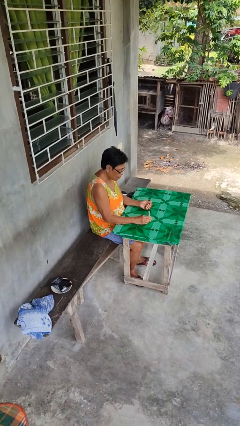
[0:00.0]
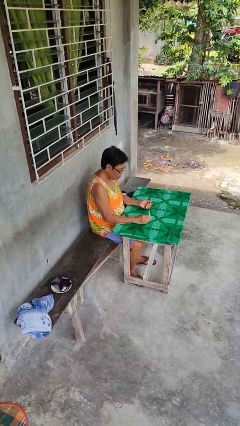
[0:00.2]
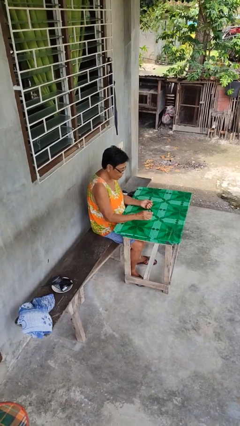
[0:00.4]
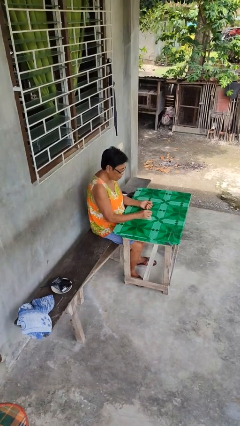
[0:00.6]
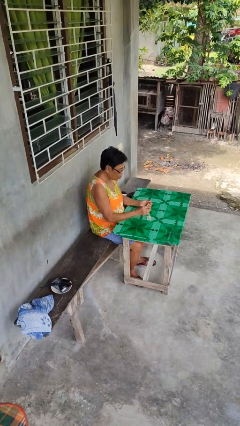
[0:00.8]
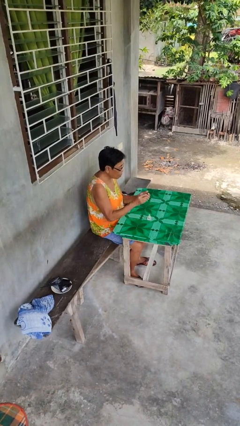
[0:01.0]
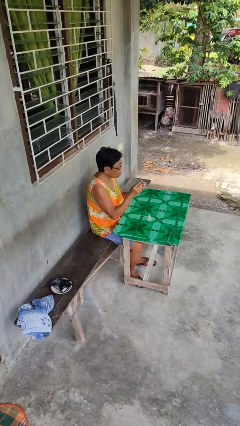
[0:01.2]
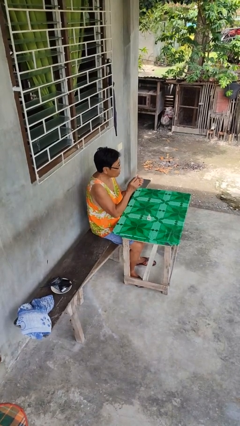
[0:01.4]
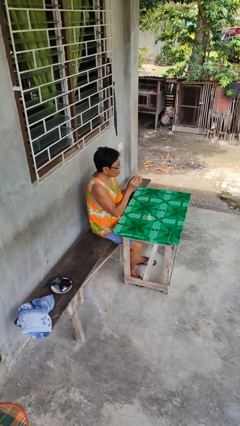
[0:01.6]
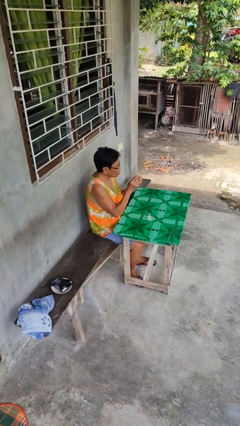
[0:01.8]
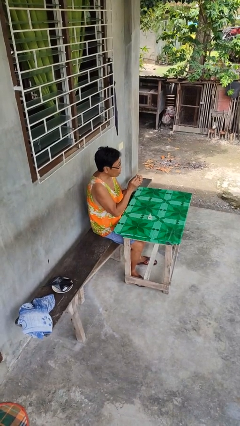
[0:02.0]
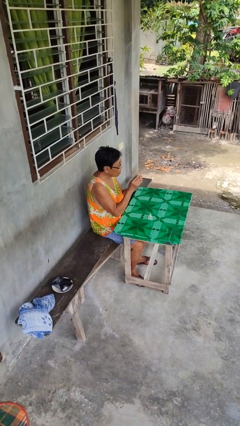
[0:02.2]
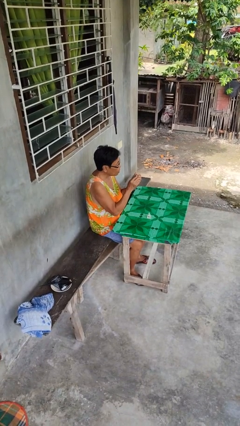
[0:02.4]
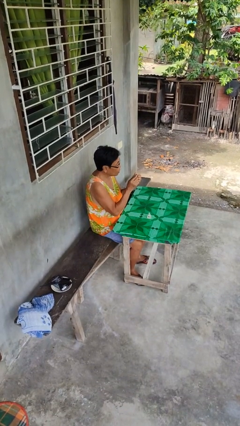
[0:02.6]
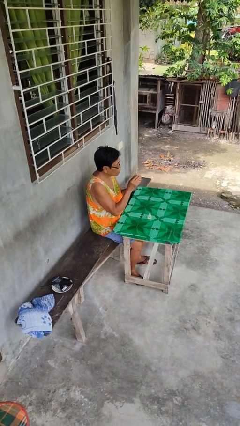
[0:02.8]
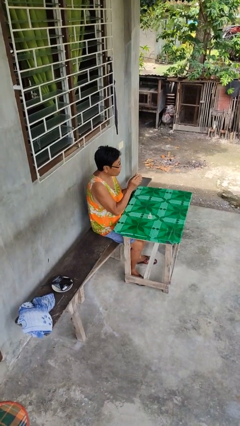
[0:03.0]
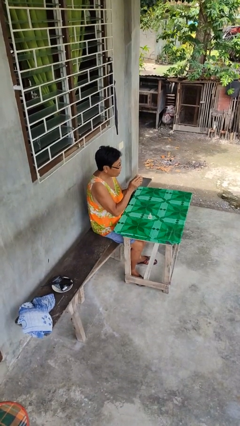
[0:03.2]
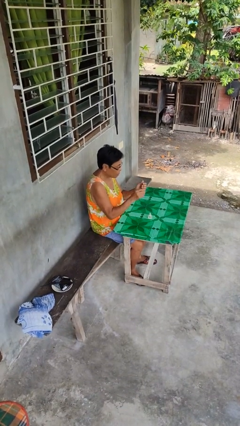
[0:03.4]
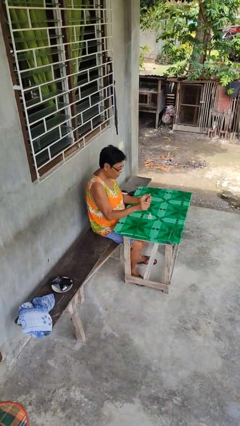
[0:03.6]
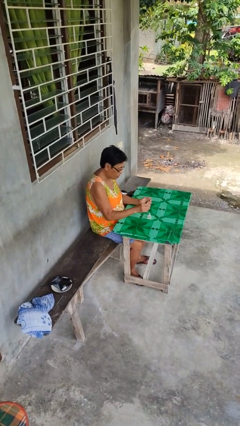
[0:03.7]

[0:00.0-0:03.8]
person paints fingernails

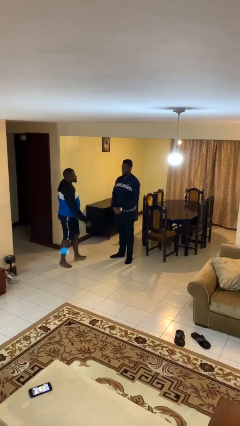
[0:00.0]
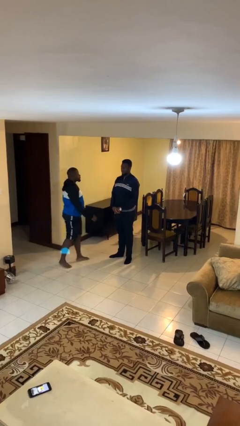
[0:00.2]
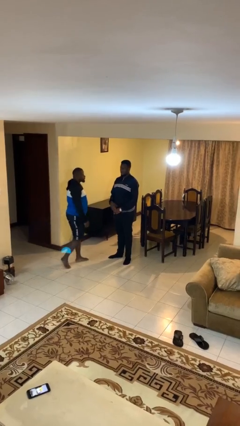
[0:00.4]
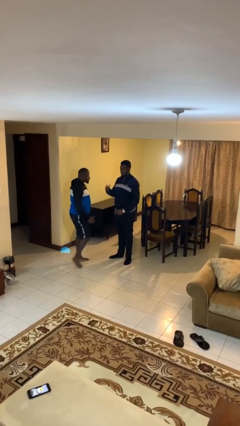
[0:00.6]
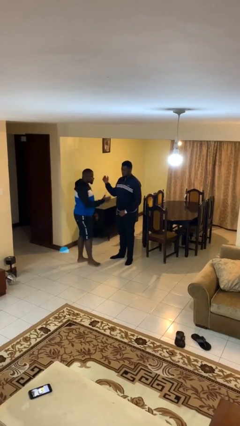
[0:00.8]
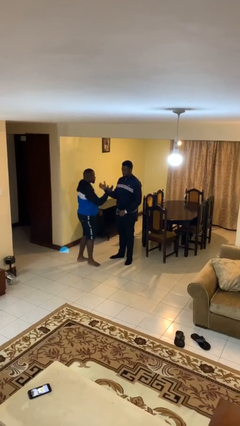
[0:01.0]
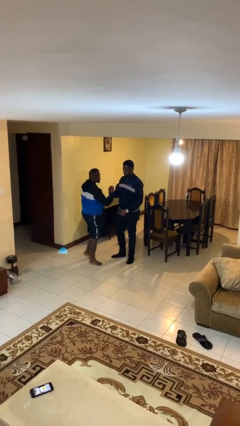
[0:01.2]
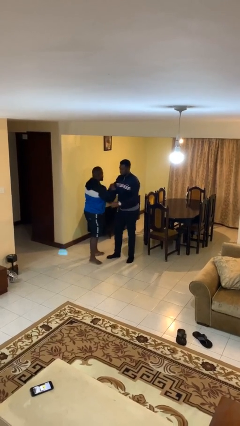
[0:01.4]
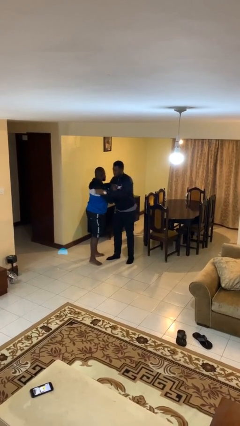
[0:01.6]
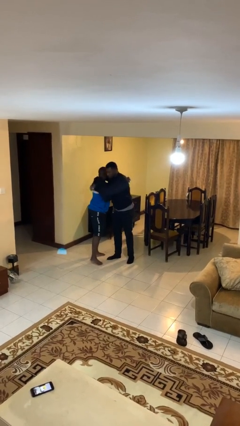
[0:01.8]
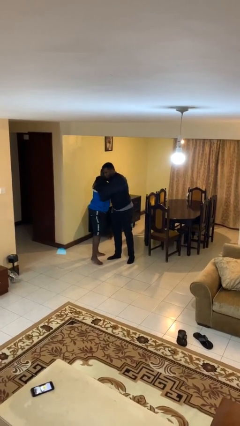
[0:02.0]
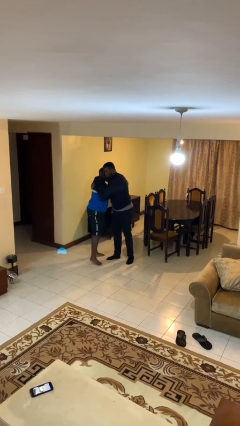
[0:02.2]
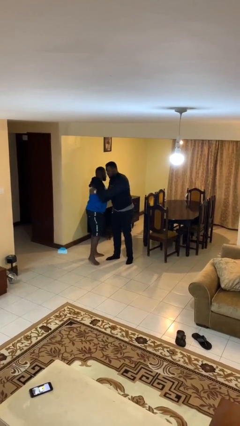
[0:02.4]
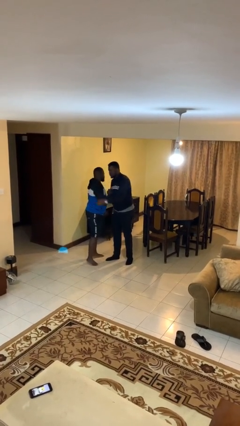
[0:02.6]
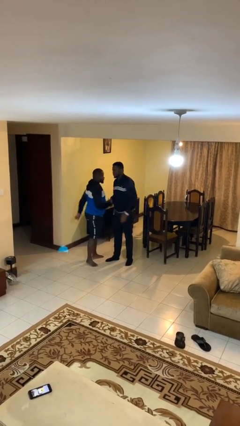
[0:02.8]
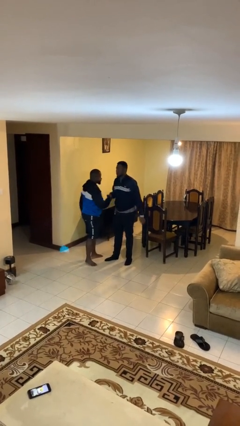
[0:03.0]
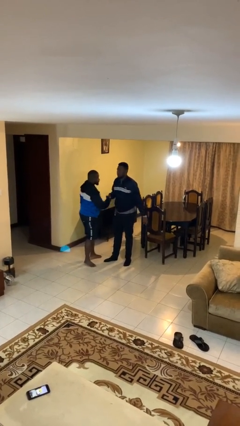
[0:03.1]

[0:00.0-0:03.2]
person embraces person

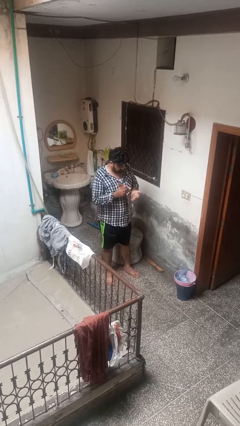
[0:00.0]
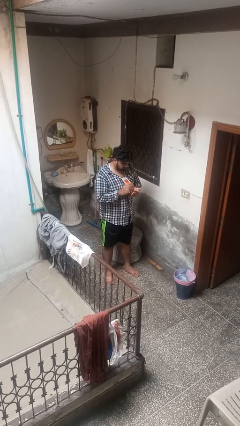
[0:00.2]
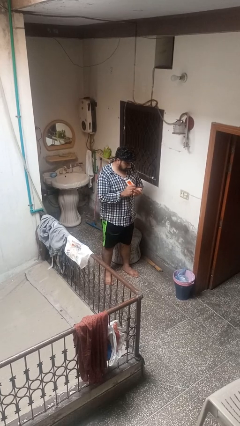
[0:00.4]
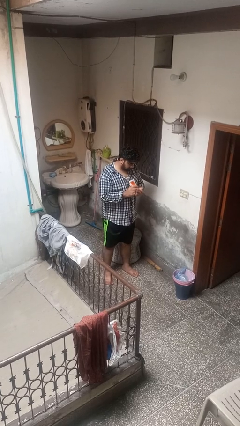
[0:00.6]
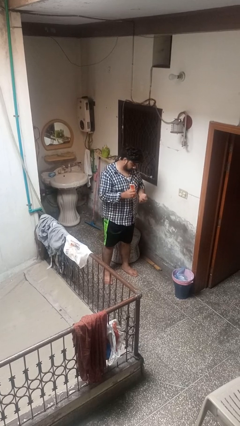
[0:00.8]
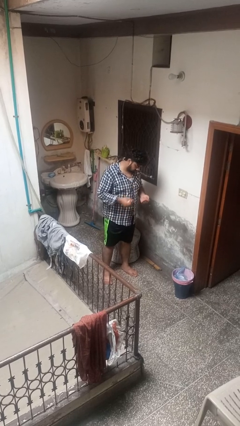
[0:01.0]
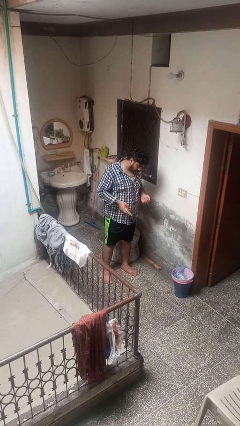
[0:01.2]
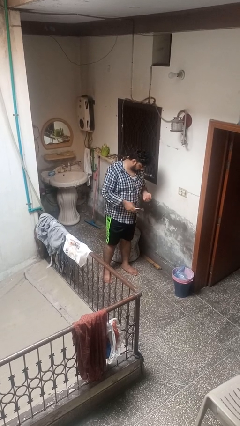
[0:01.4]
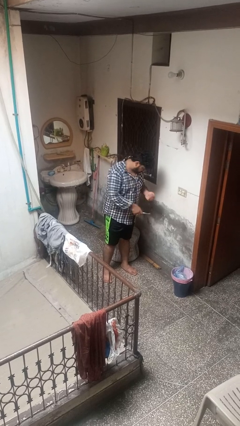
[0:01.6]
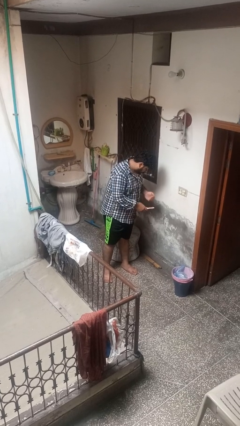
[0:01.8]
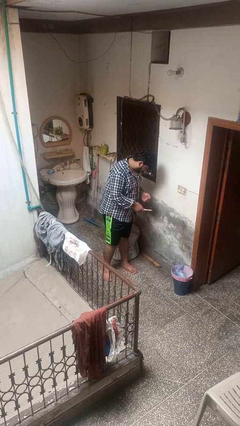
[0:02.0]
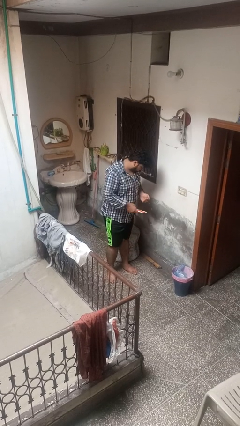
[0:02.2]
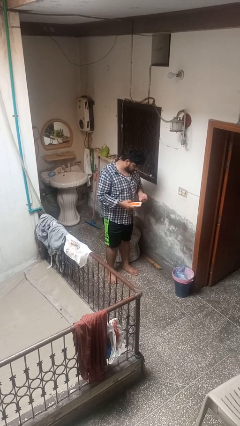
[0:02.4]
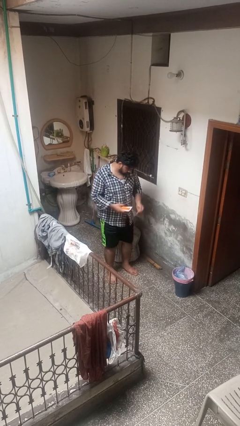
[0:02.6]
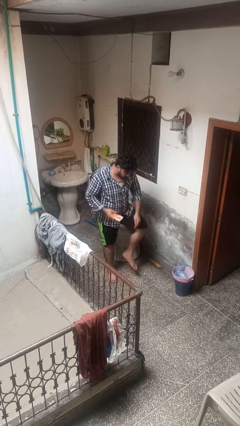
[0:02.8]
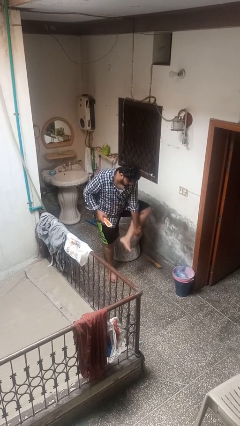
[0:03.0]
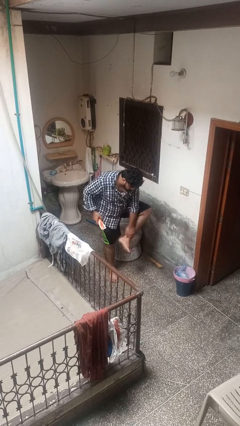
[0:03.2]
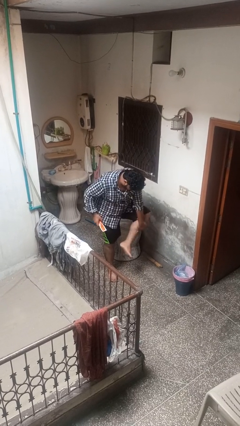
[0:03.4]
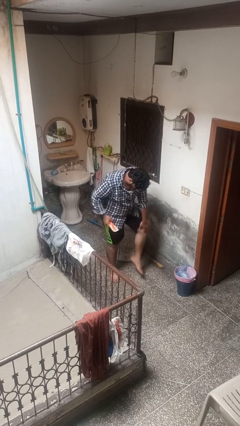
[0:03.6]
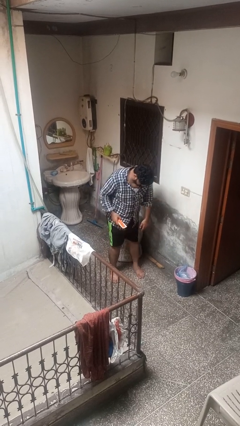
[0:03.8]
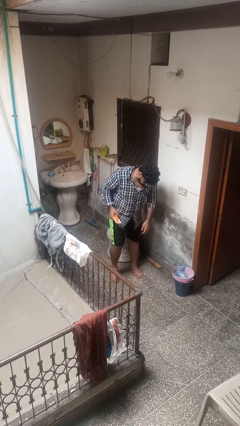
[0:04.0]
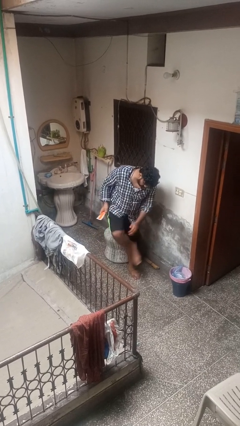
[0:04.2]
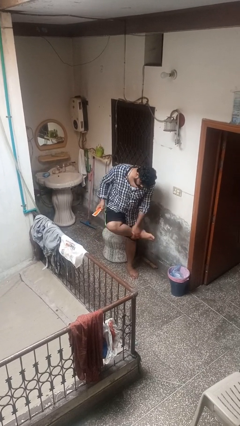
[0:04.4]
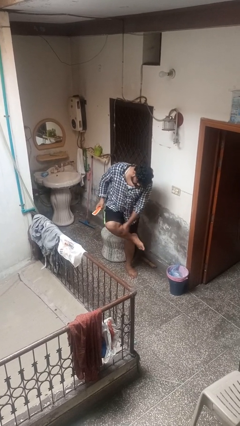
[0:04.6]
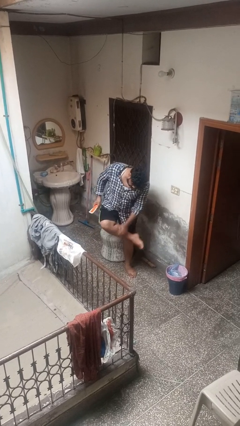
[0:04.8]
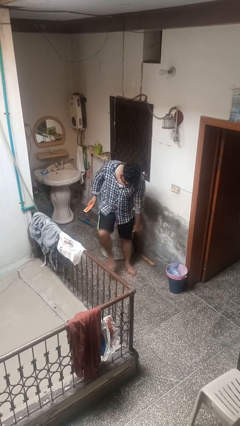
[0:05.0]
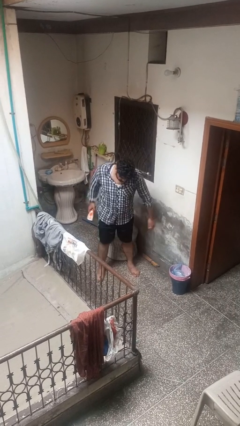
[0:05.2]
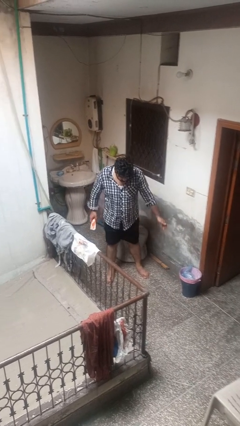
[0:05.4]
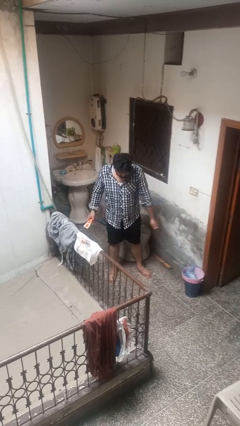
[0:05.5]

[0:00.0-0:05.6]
person applies sunscreen

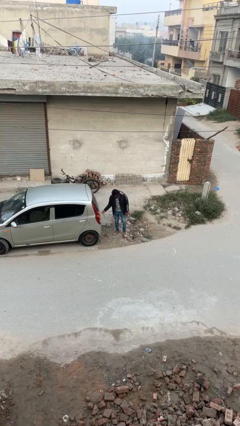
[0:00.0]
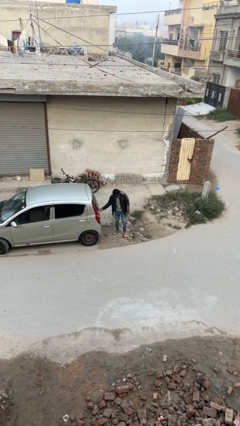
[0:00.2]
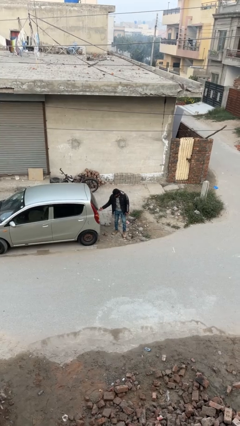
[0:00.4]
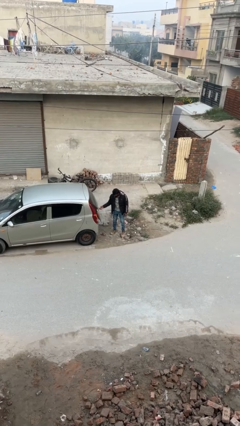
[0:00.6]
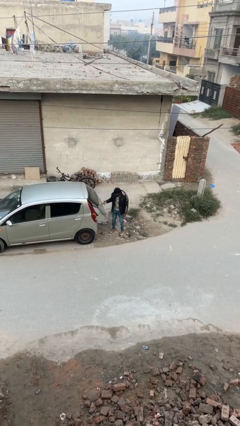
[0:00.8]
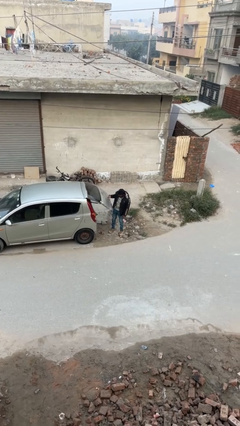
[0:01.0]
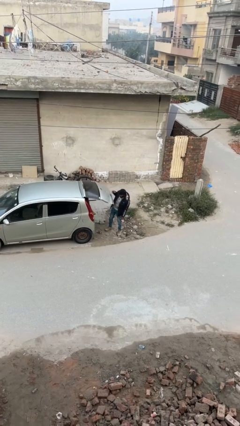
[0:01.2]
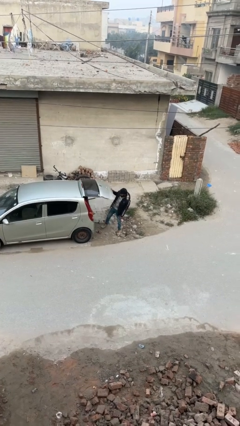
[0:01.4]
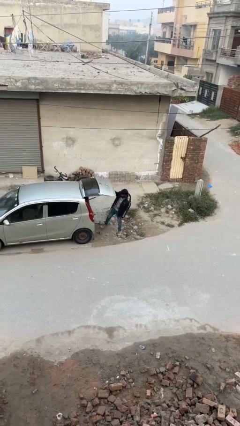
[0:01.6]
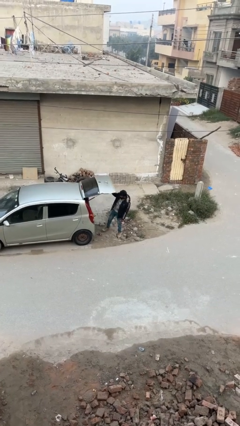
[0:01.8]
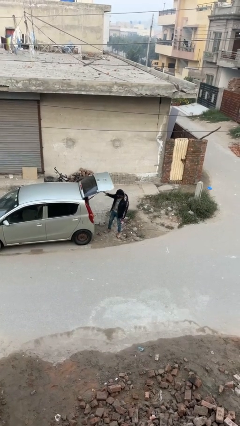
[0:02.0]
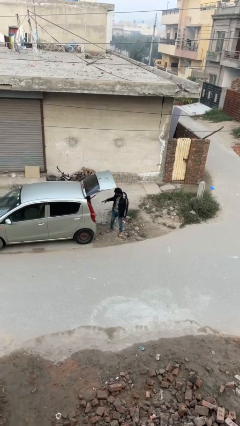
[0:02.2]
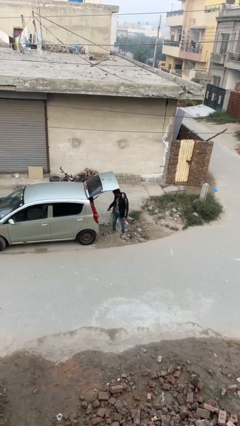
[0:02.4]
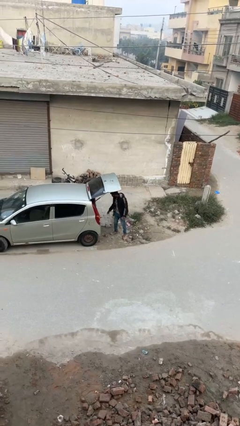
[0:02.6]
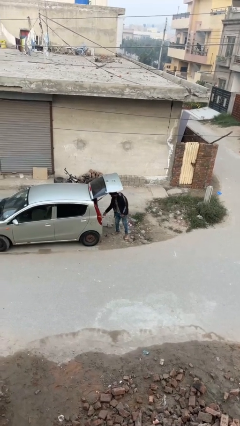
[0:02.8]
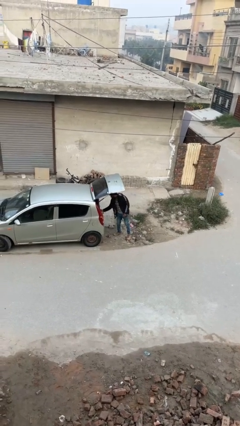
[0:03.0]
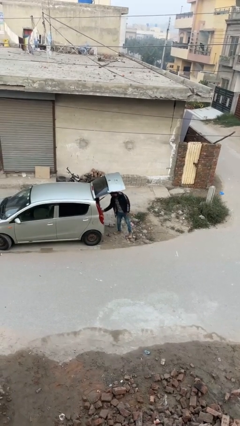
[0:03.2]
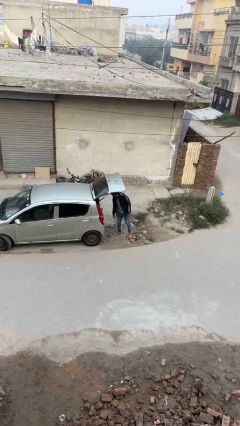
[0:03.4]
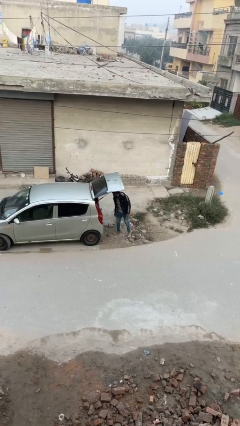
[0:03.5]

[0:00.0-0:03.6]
person opens car trunk

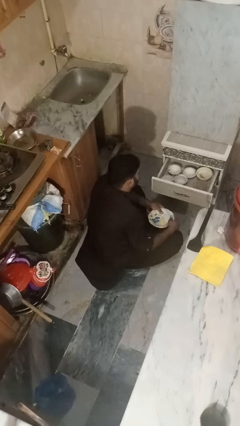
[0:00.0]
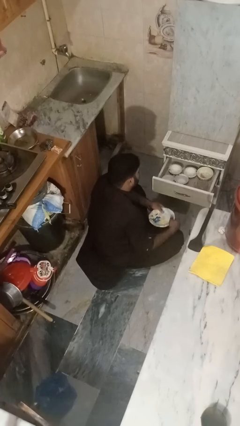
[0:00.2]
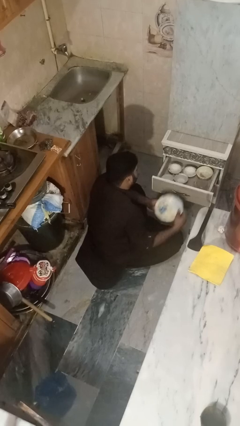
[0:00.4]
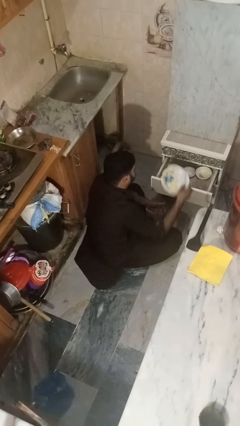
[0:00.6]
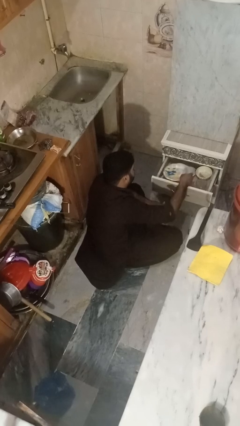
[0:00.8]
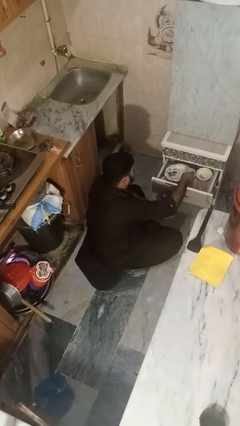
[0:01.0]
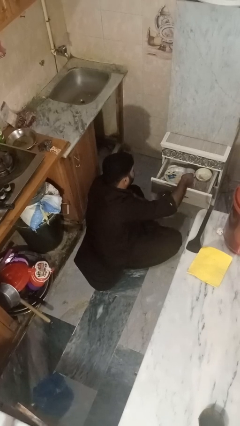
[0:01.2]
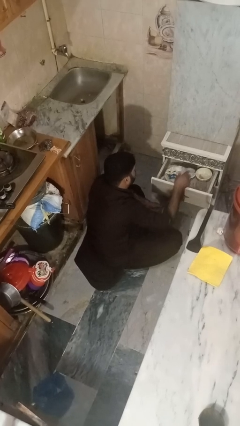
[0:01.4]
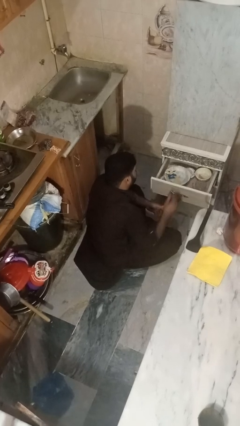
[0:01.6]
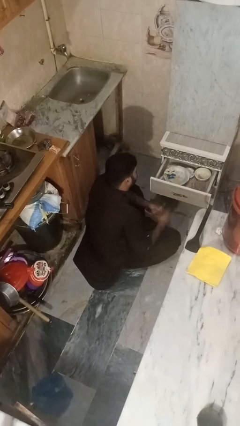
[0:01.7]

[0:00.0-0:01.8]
person puts object into kitchen drawer
